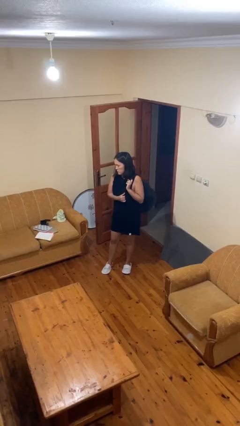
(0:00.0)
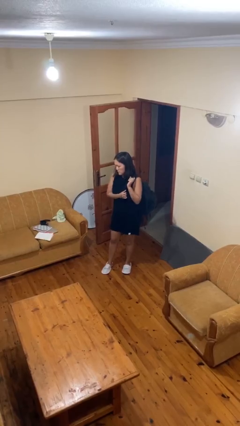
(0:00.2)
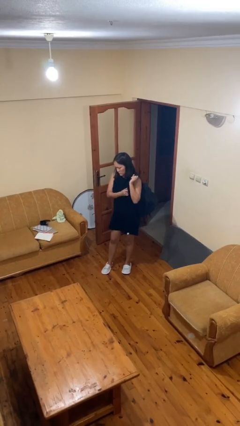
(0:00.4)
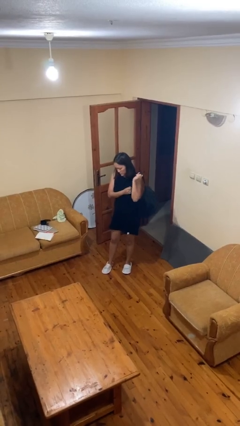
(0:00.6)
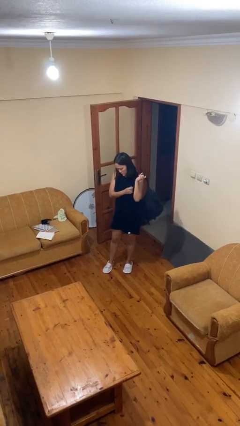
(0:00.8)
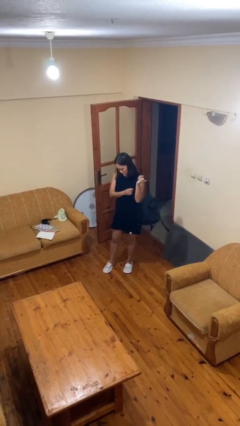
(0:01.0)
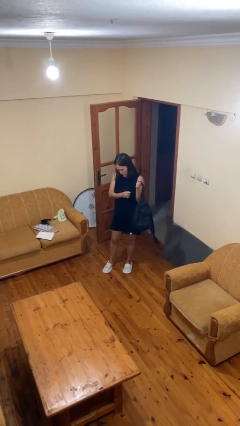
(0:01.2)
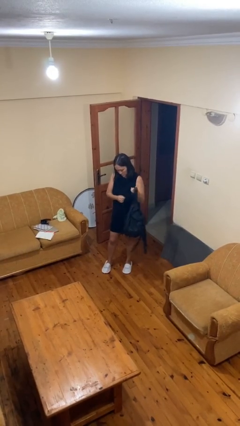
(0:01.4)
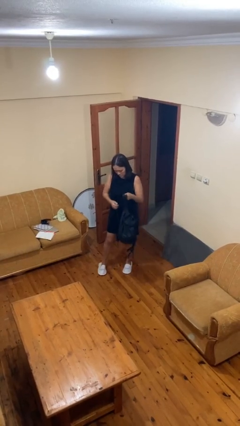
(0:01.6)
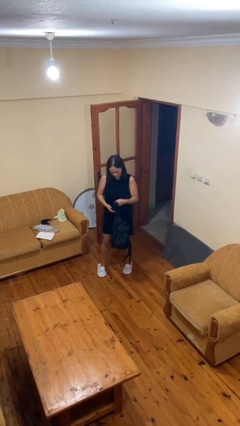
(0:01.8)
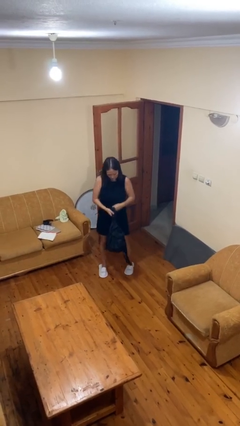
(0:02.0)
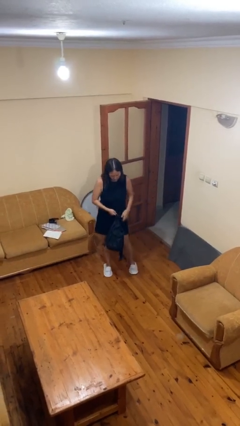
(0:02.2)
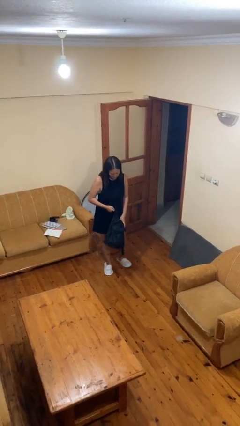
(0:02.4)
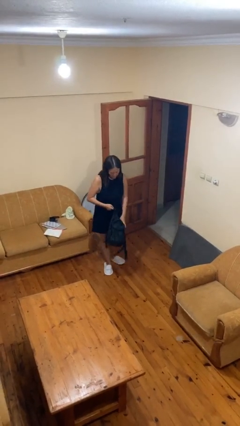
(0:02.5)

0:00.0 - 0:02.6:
person takes off backpack

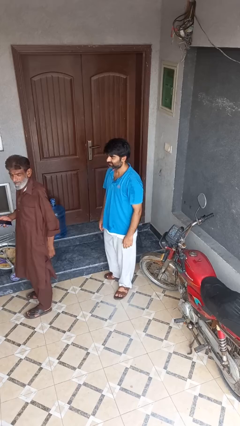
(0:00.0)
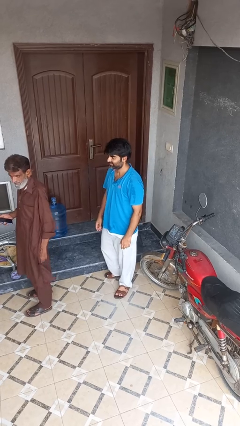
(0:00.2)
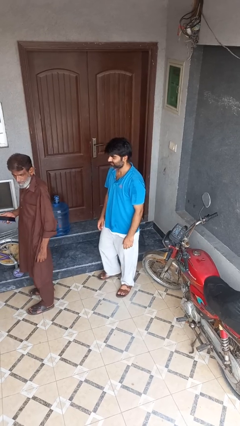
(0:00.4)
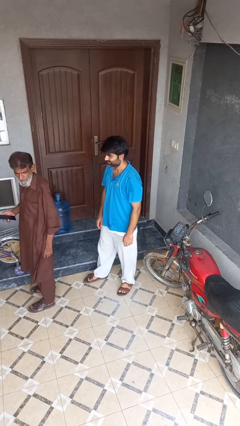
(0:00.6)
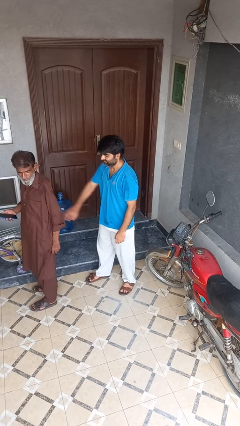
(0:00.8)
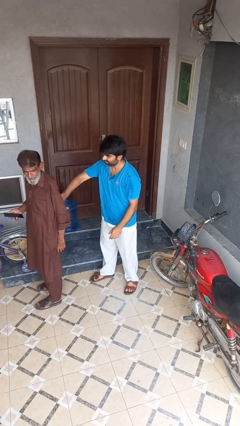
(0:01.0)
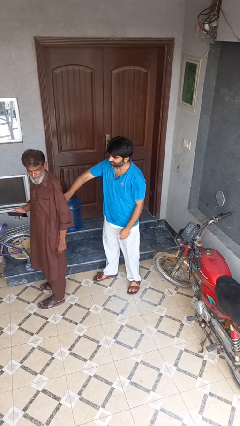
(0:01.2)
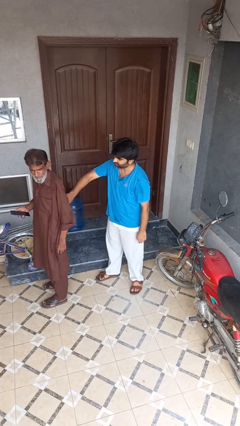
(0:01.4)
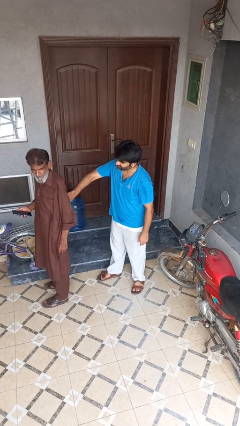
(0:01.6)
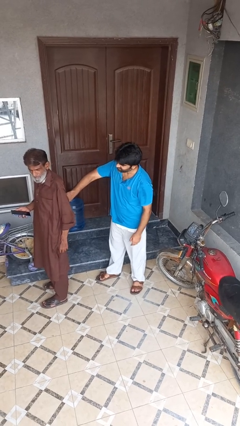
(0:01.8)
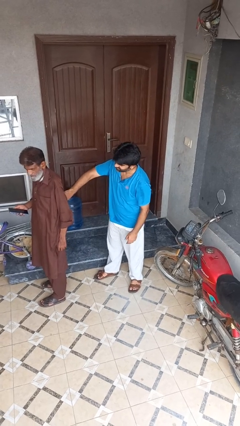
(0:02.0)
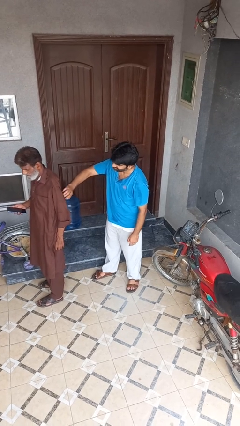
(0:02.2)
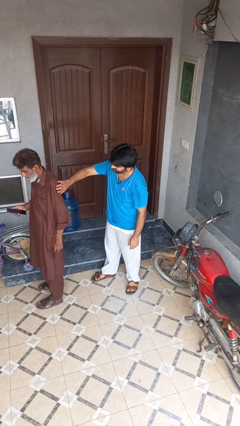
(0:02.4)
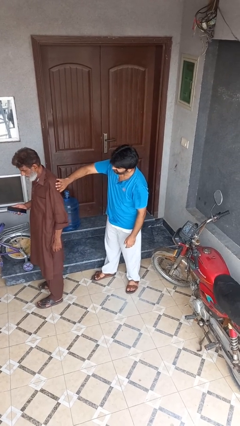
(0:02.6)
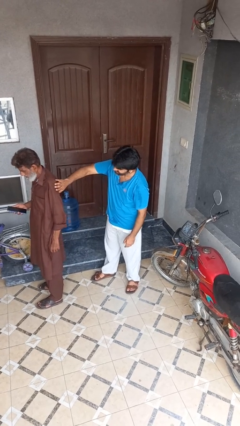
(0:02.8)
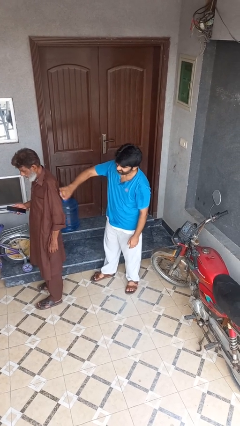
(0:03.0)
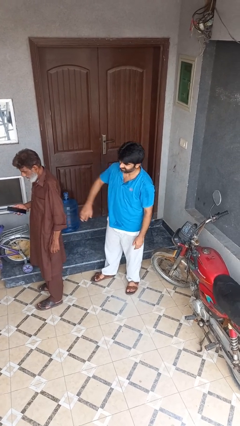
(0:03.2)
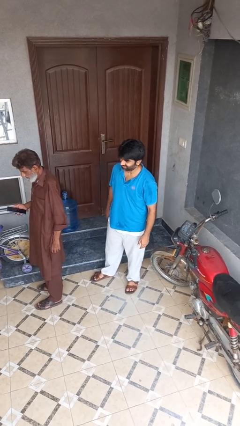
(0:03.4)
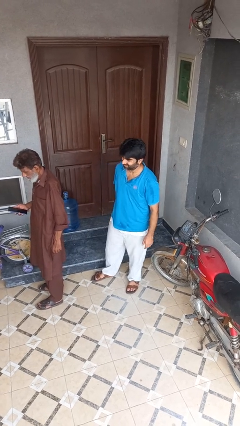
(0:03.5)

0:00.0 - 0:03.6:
person touches back of person

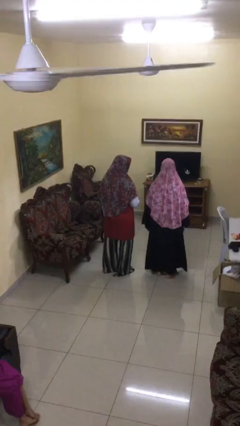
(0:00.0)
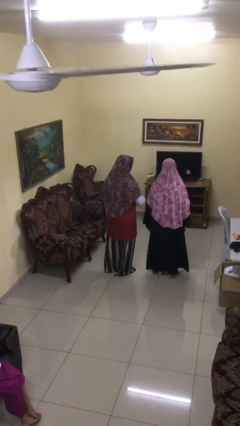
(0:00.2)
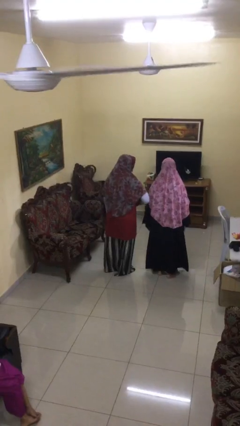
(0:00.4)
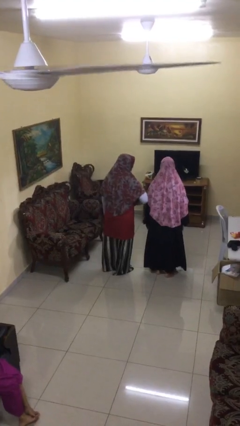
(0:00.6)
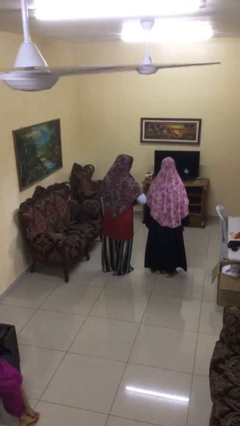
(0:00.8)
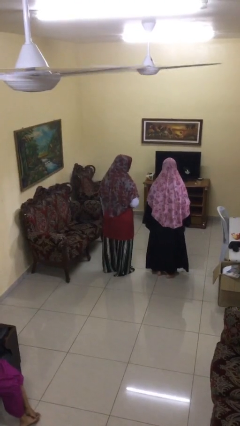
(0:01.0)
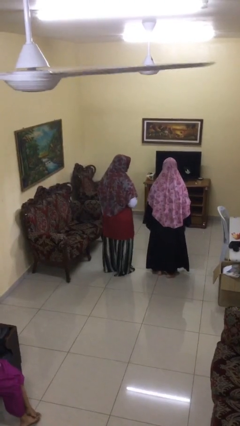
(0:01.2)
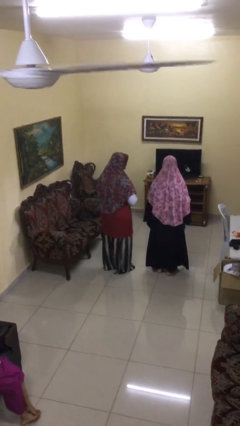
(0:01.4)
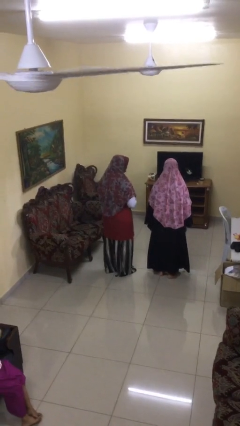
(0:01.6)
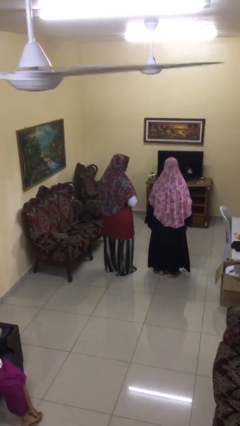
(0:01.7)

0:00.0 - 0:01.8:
person nudges person with elbow

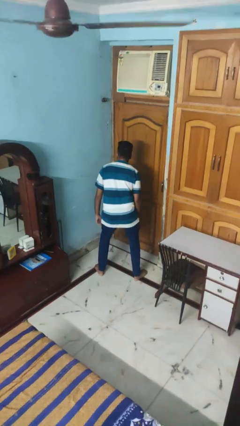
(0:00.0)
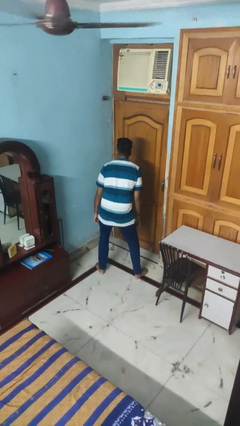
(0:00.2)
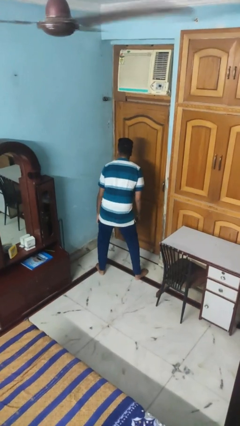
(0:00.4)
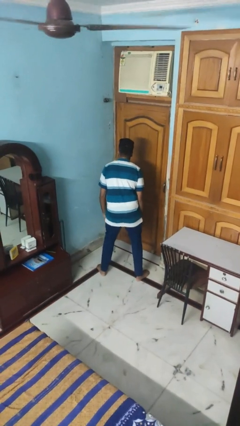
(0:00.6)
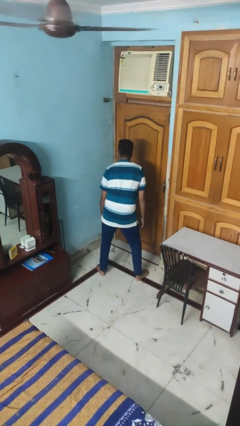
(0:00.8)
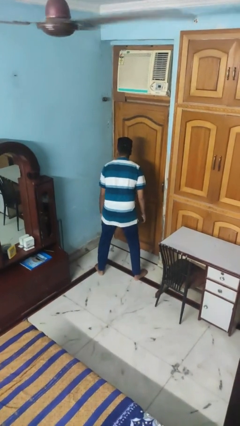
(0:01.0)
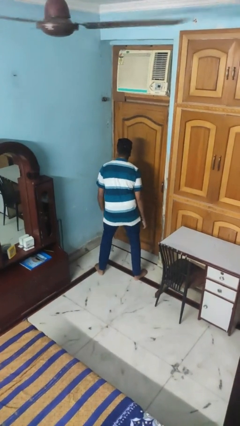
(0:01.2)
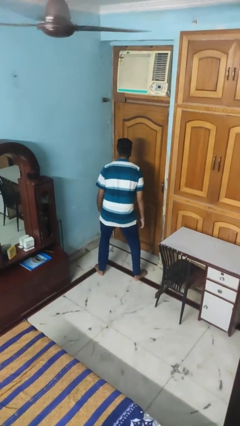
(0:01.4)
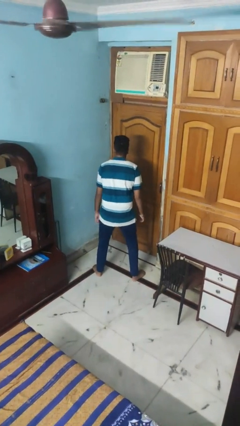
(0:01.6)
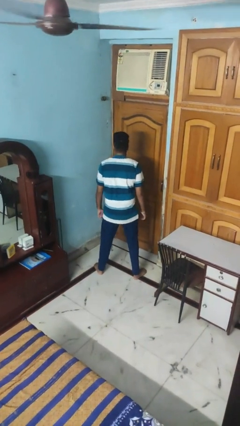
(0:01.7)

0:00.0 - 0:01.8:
person wiggles hips

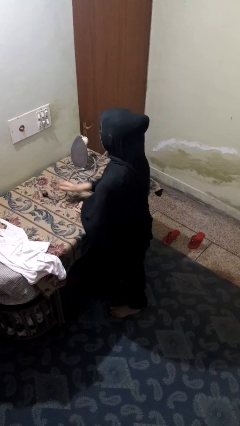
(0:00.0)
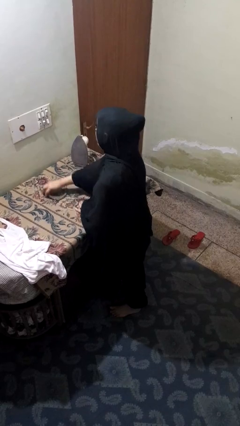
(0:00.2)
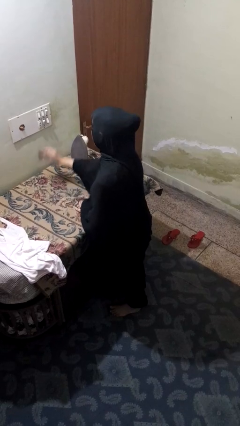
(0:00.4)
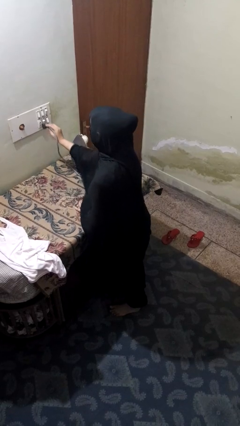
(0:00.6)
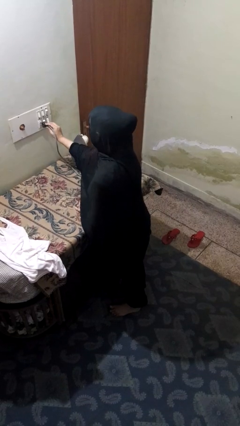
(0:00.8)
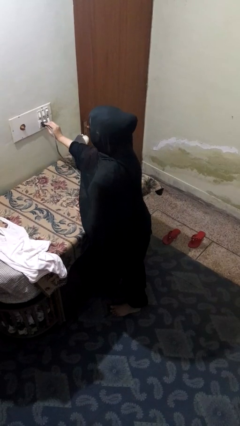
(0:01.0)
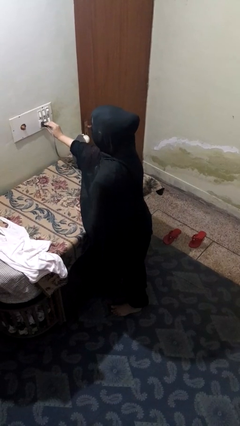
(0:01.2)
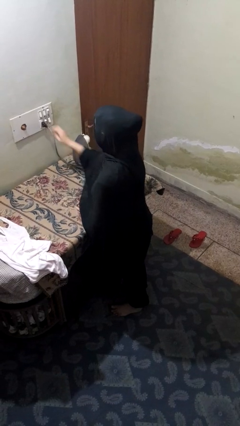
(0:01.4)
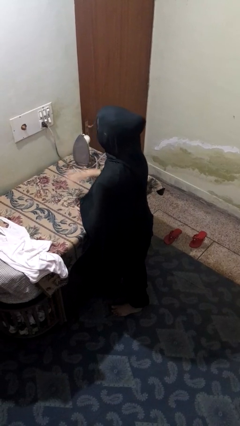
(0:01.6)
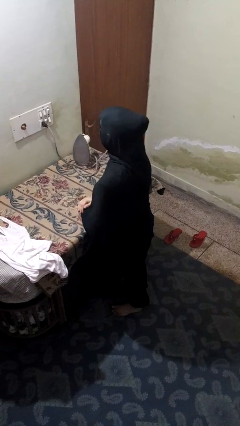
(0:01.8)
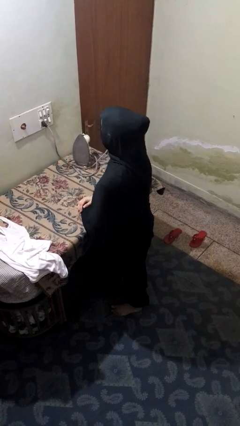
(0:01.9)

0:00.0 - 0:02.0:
person plugs into electrical socket

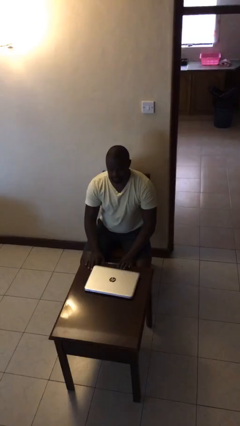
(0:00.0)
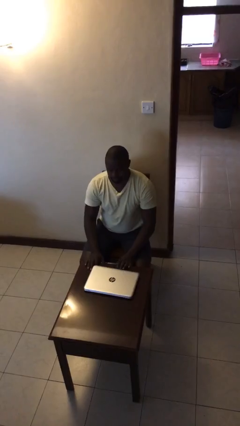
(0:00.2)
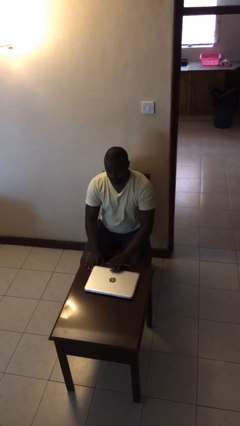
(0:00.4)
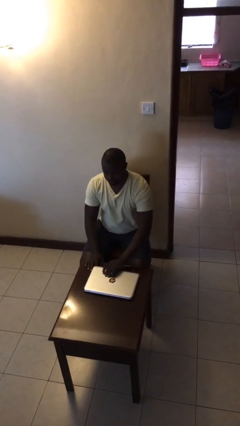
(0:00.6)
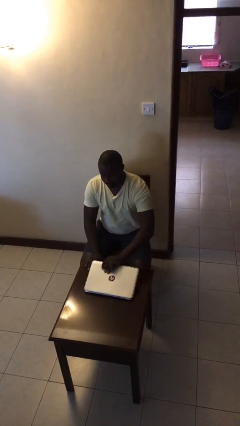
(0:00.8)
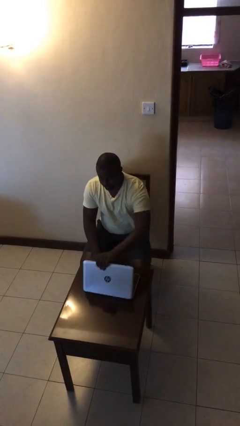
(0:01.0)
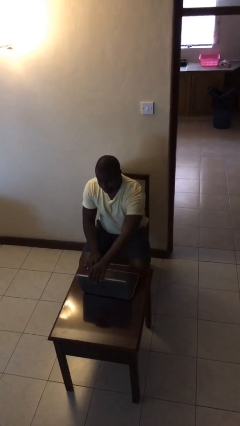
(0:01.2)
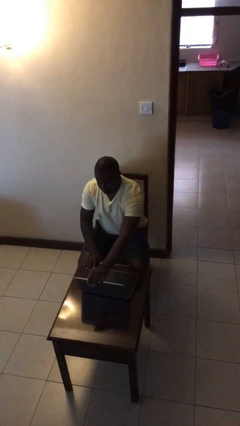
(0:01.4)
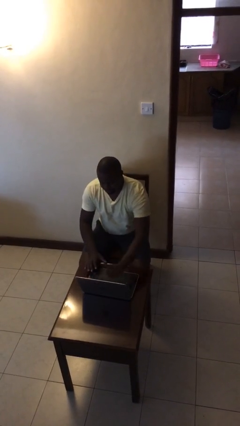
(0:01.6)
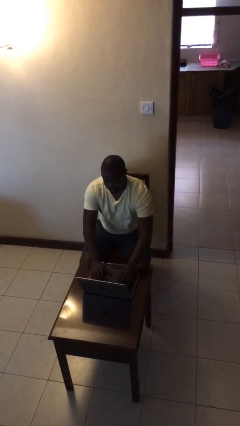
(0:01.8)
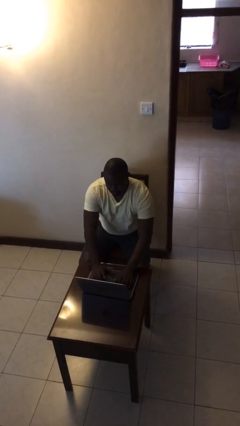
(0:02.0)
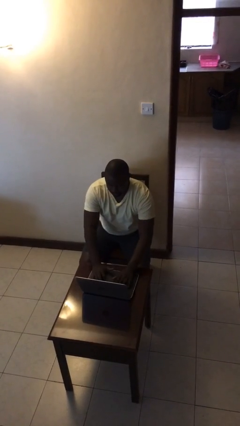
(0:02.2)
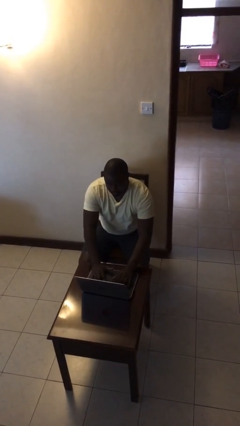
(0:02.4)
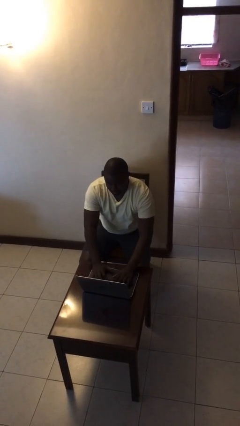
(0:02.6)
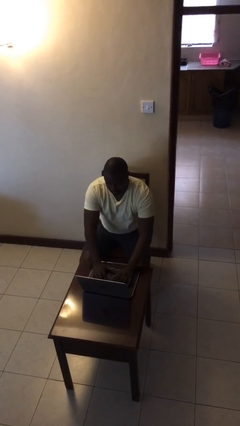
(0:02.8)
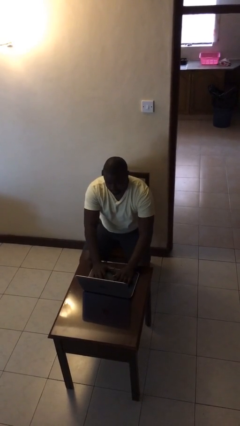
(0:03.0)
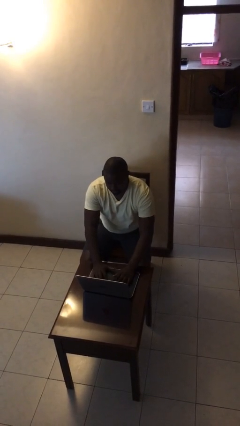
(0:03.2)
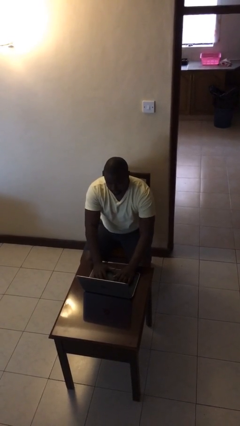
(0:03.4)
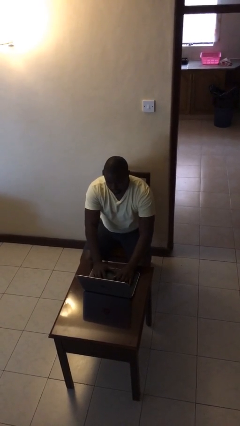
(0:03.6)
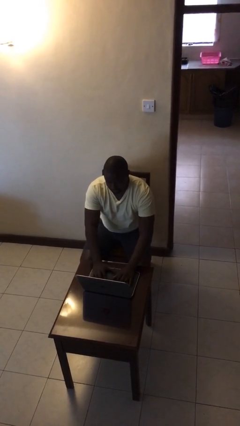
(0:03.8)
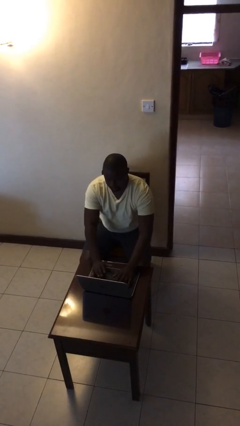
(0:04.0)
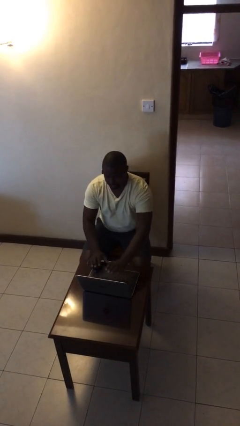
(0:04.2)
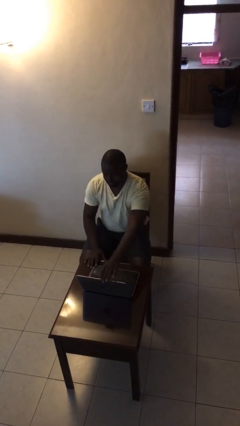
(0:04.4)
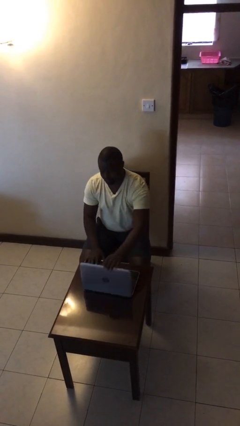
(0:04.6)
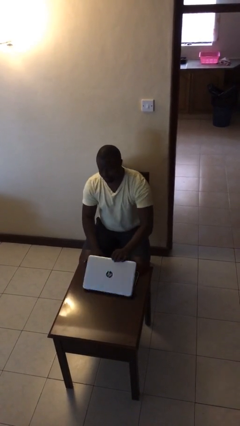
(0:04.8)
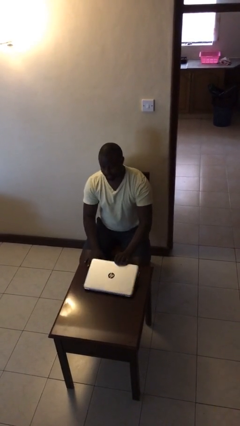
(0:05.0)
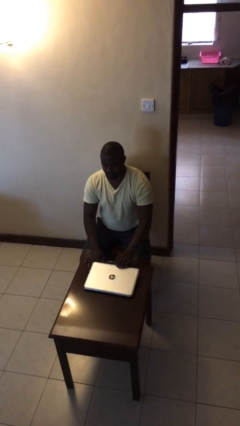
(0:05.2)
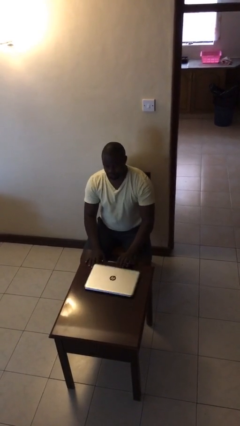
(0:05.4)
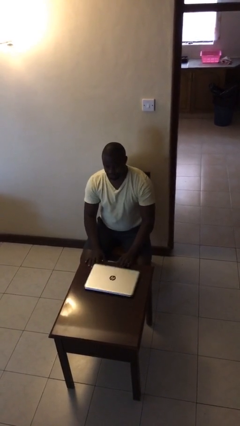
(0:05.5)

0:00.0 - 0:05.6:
person interacts with laptop
